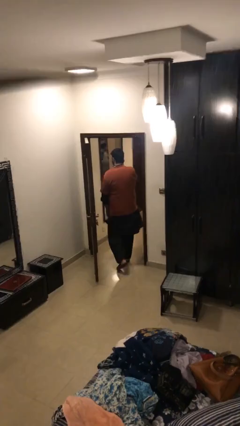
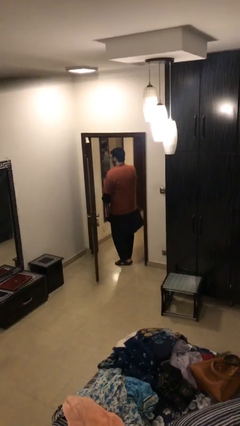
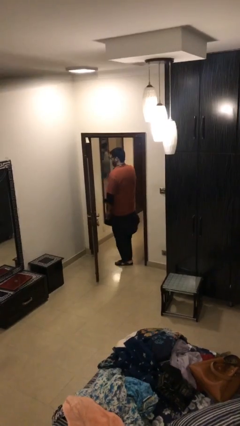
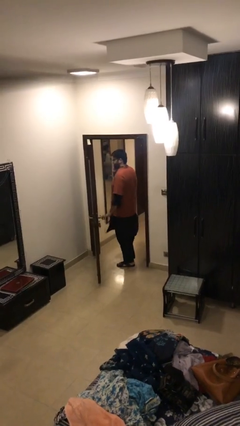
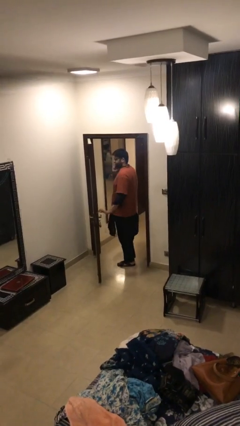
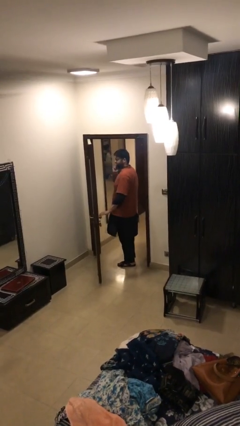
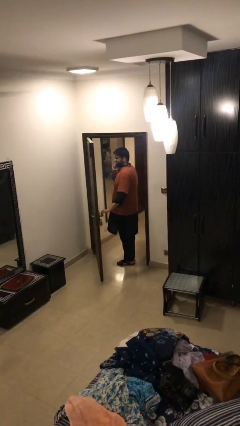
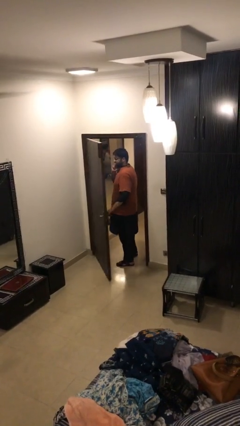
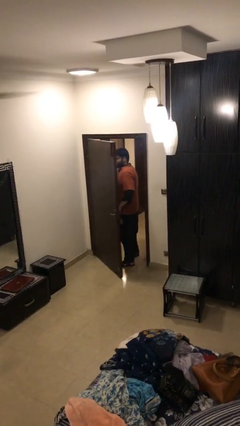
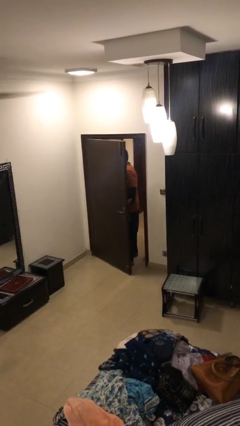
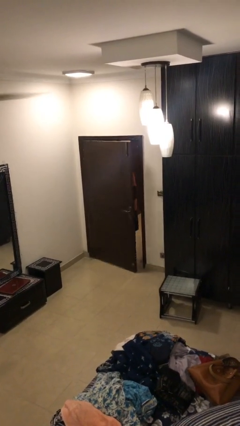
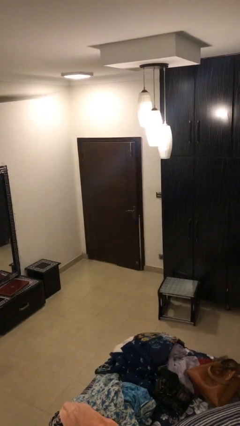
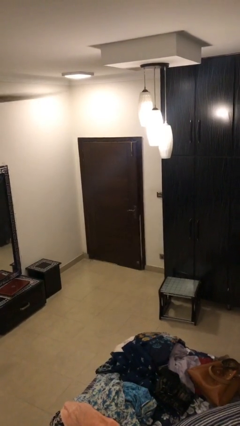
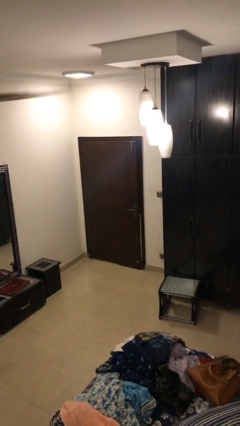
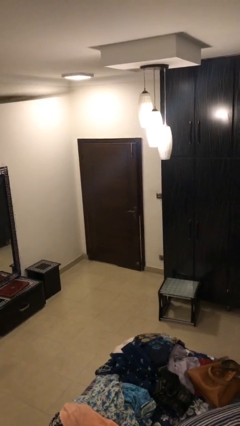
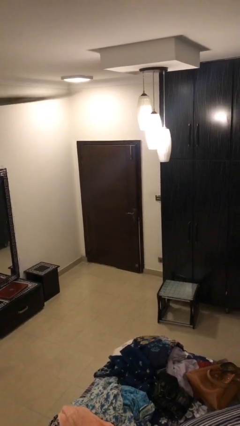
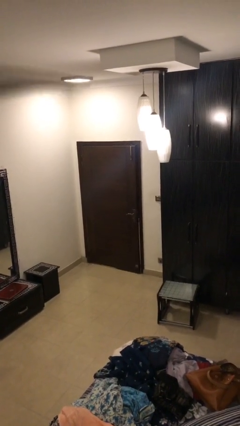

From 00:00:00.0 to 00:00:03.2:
person closes facility door

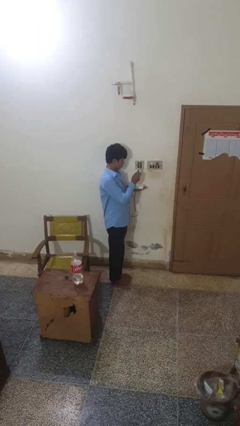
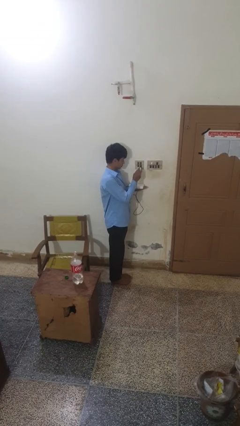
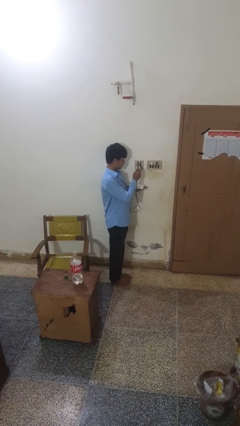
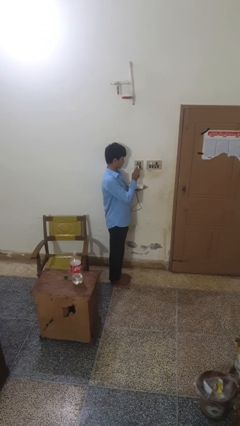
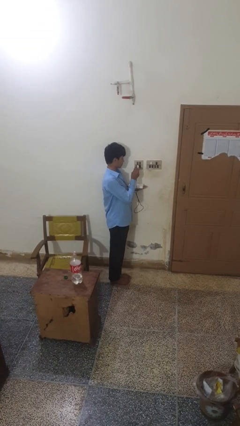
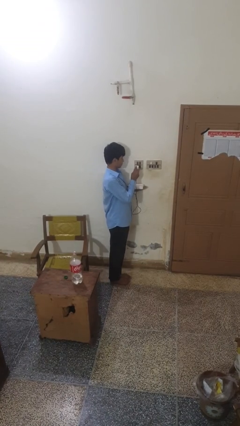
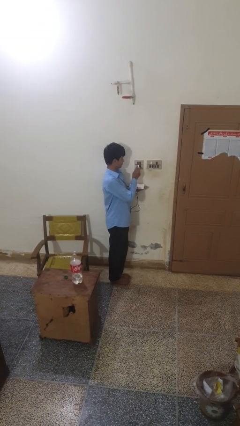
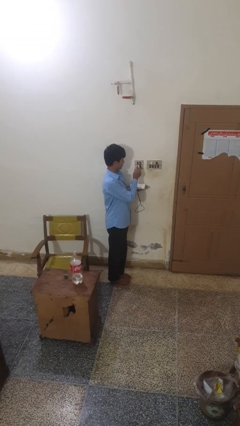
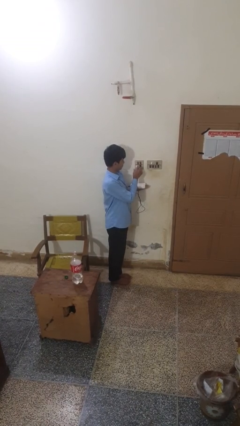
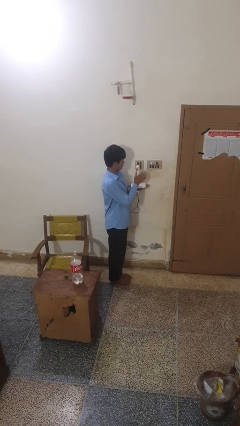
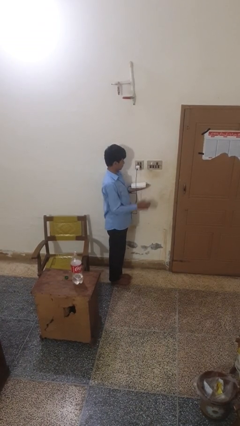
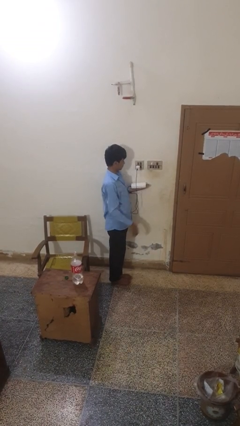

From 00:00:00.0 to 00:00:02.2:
person plugs into electrical socket

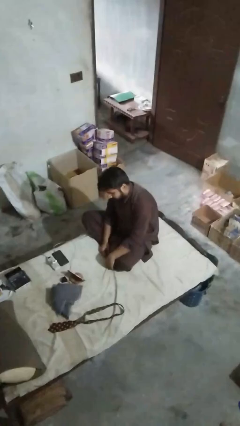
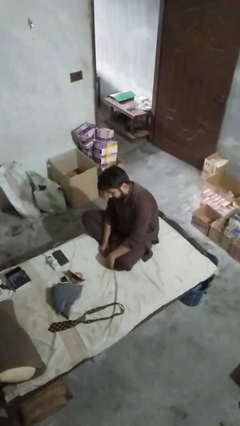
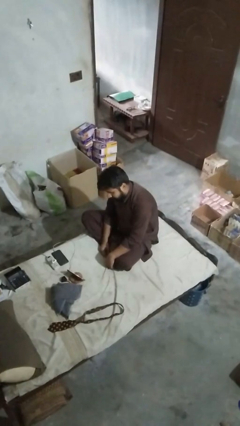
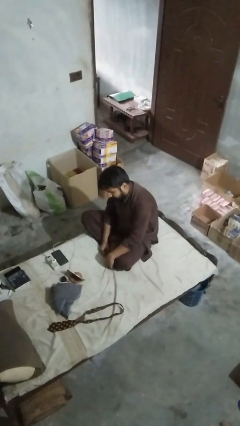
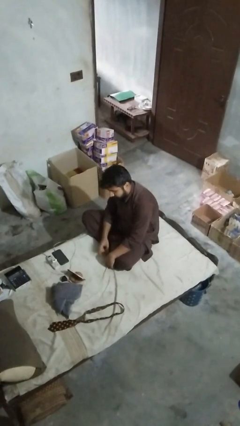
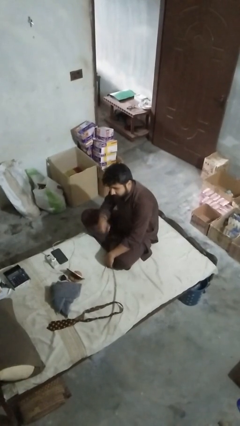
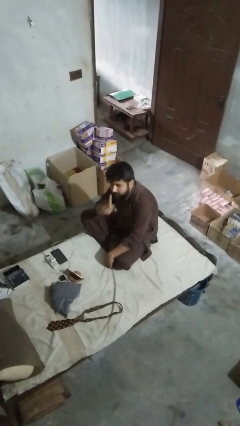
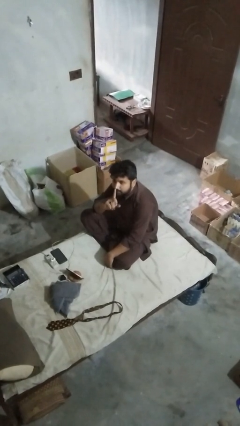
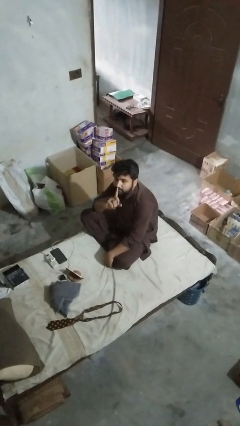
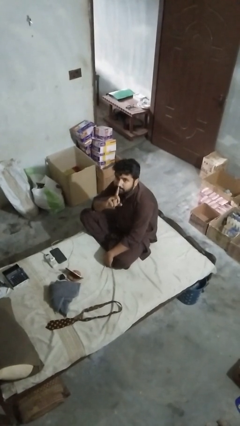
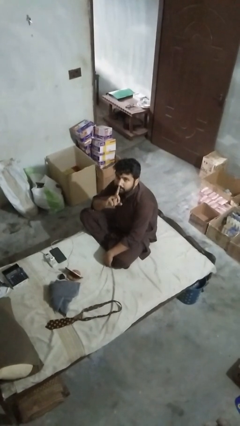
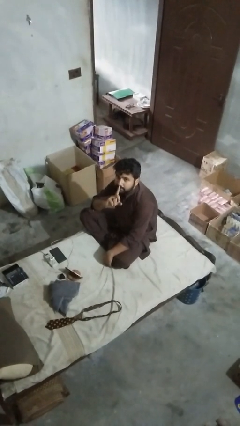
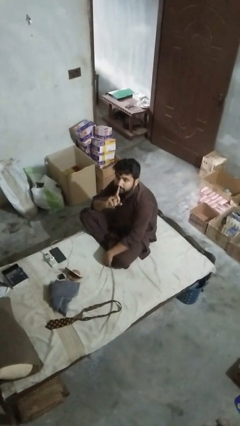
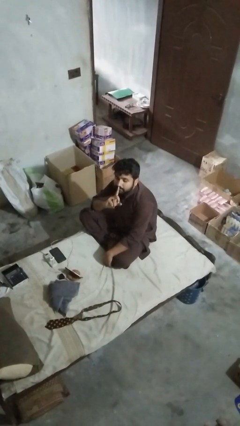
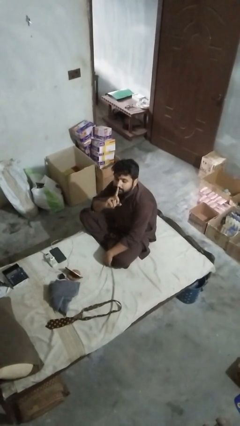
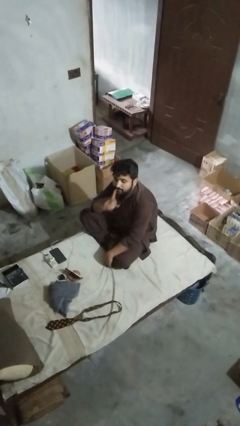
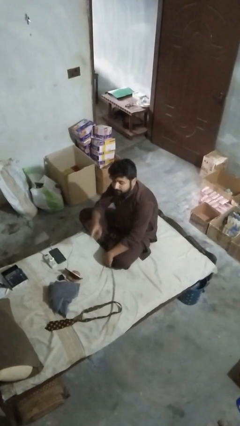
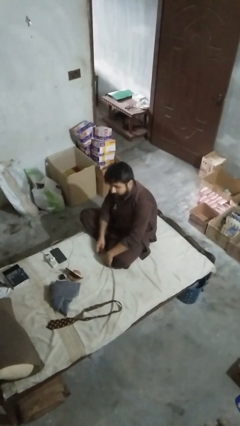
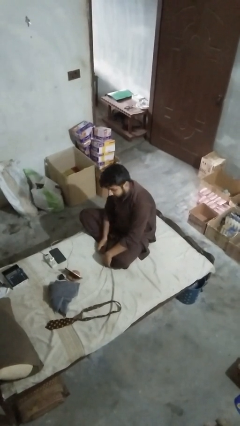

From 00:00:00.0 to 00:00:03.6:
person gestures be quiet

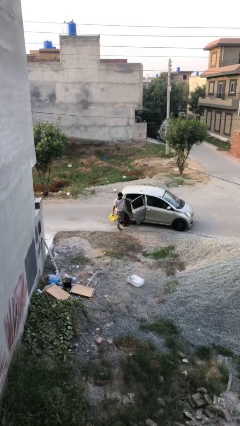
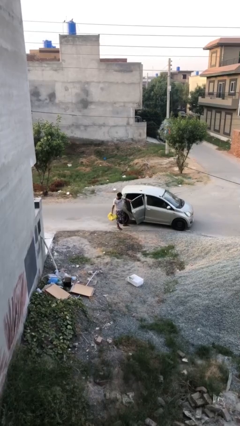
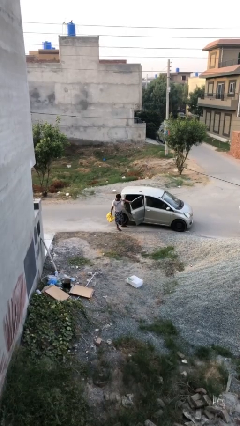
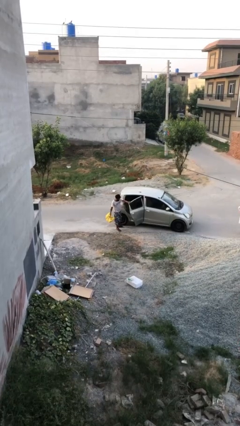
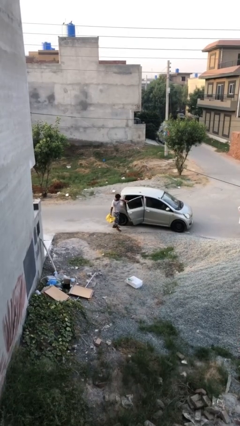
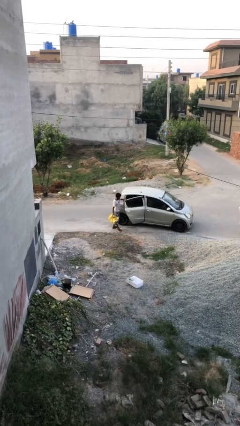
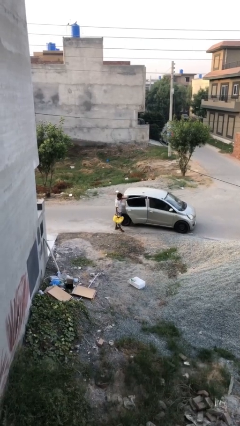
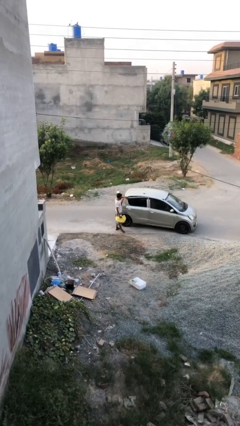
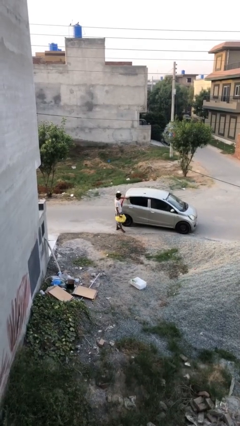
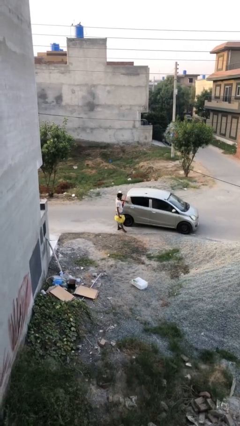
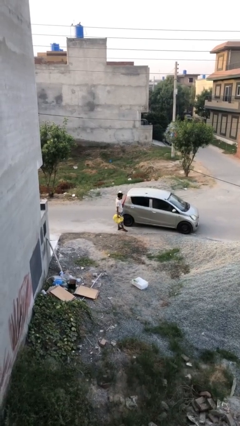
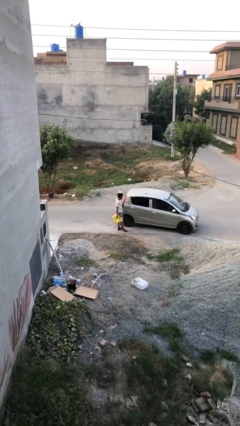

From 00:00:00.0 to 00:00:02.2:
person closes car door

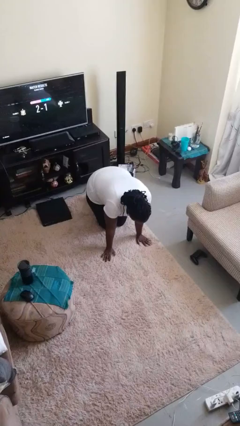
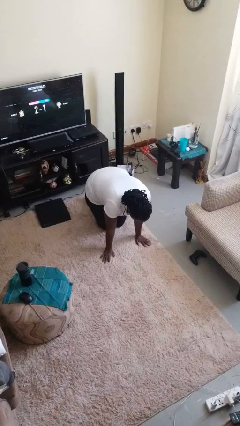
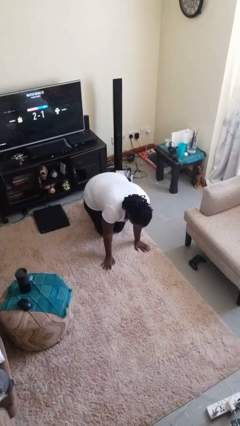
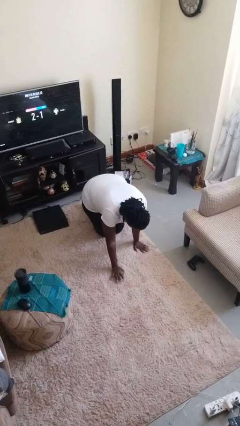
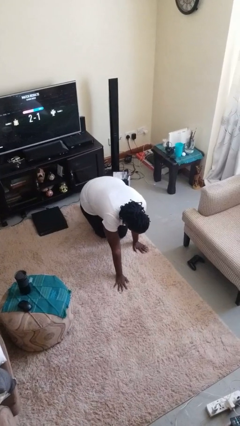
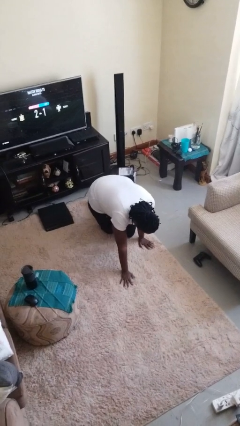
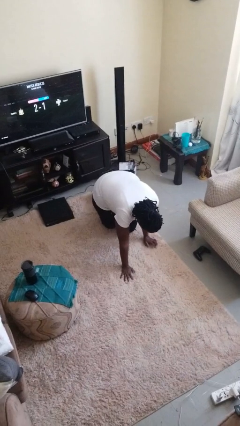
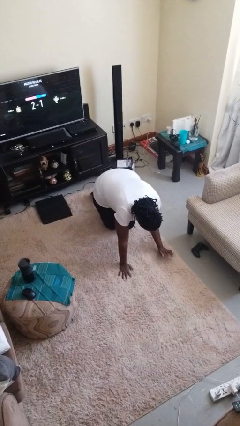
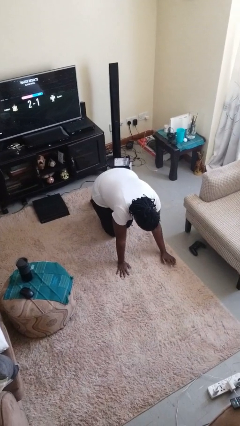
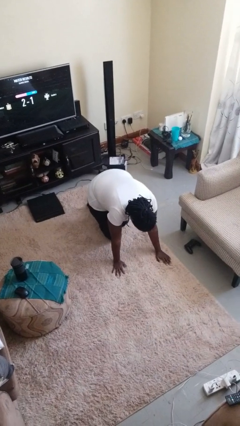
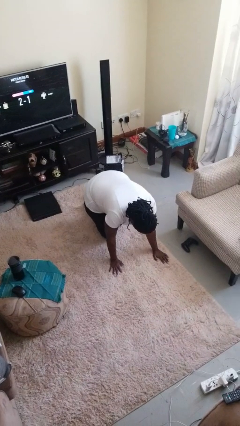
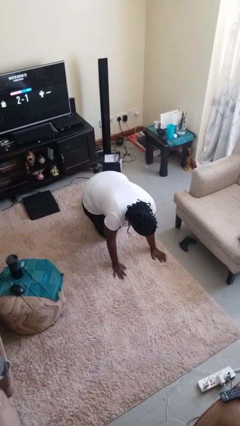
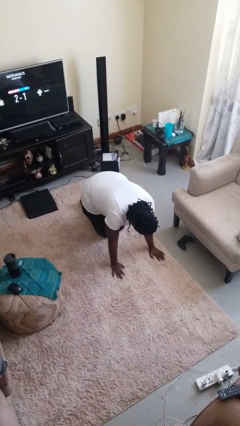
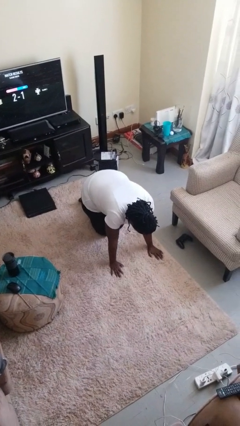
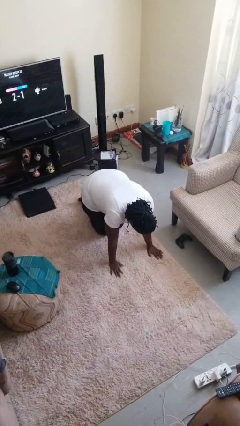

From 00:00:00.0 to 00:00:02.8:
person crawls

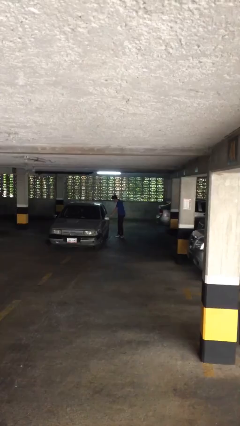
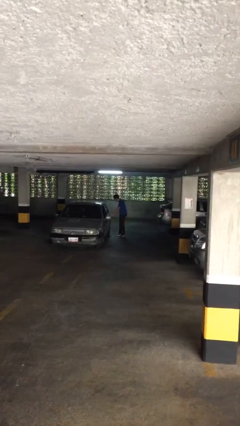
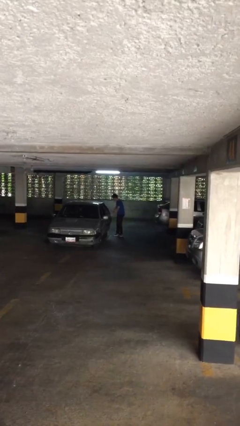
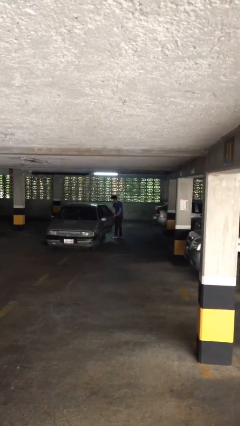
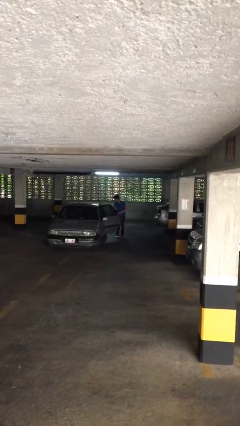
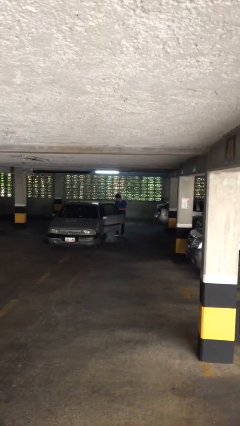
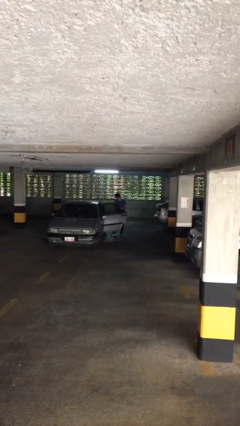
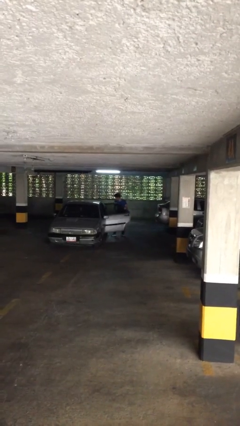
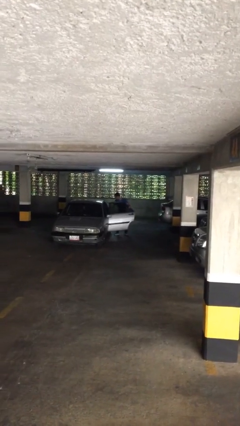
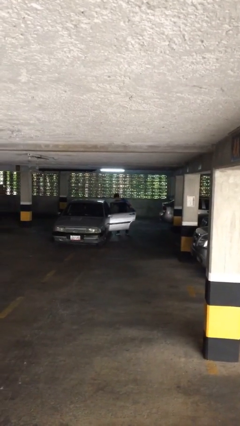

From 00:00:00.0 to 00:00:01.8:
person opens car door

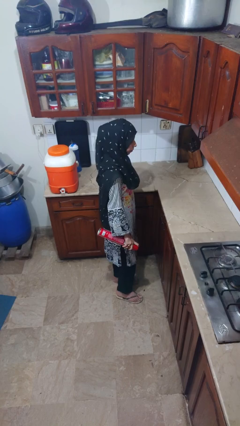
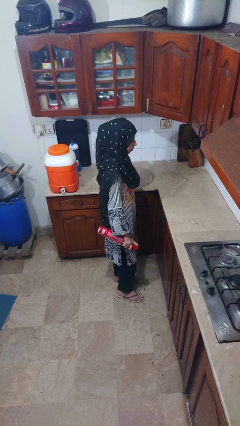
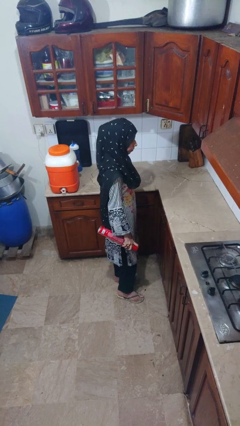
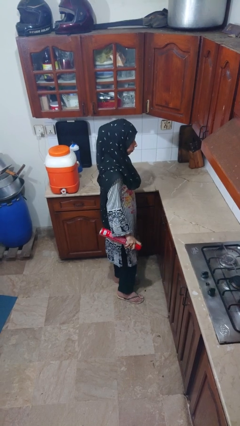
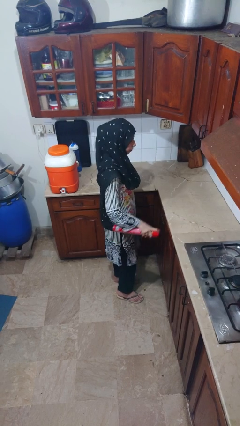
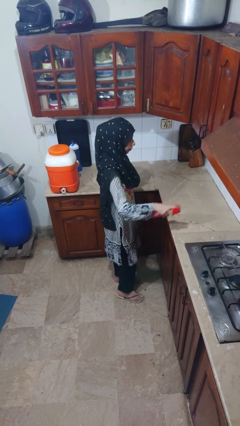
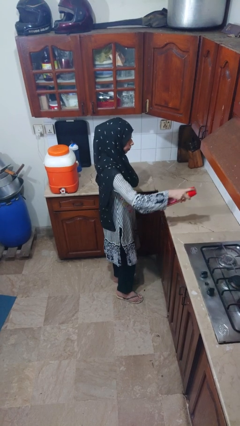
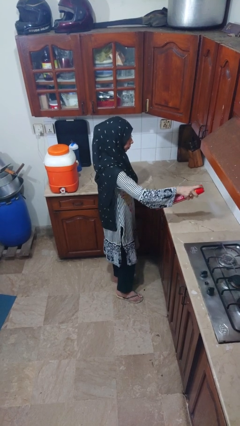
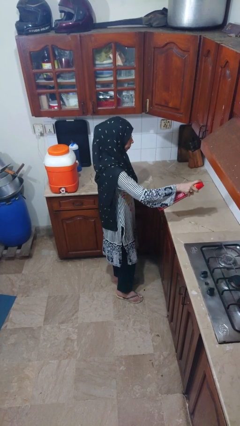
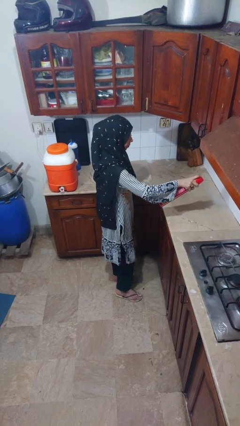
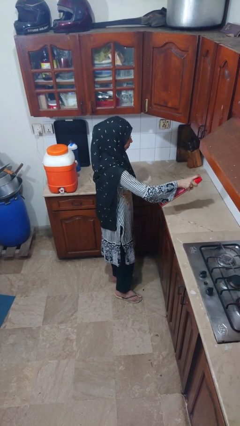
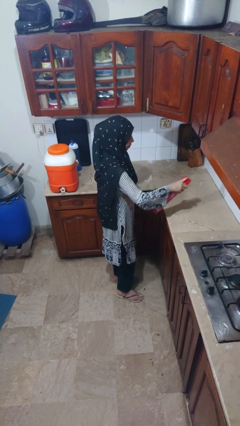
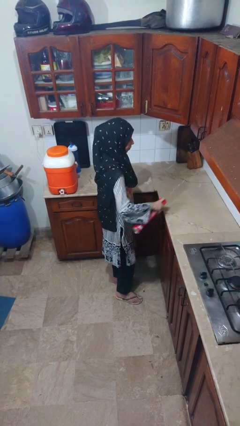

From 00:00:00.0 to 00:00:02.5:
person sprays from bottle
